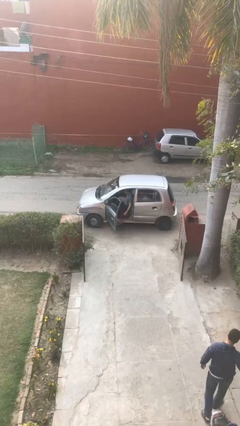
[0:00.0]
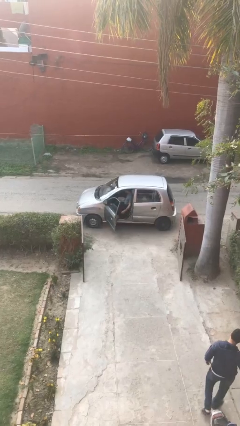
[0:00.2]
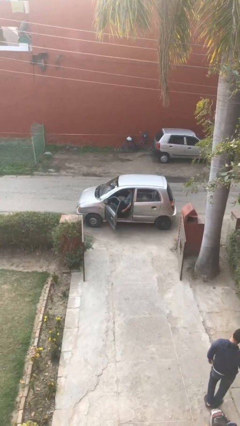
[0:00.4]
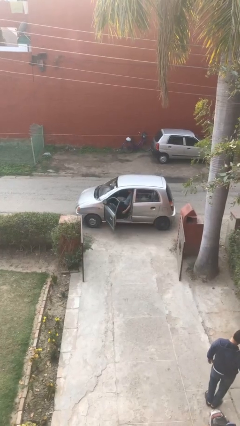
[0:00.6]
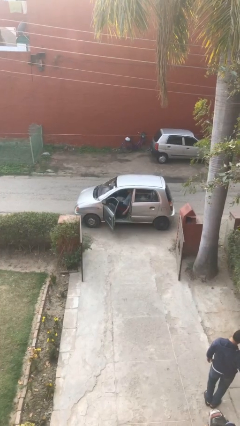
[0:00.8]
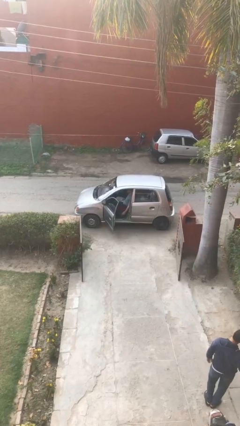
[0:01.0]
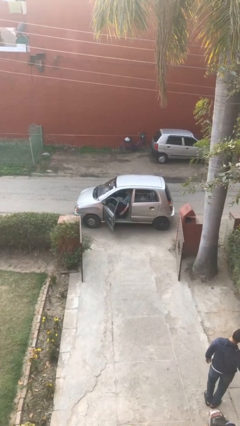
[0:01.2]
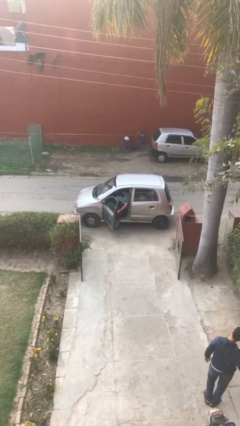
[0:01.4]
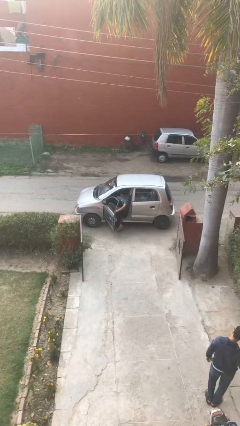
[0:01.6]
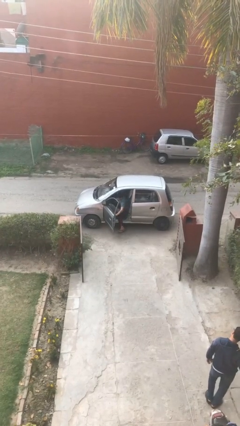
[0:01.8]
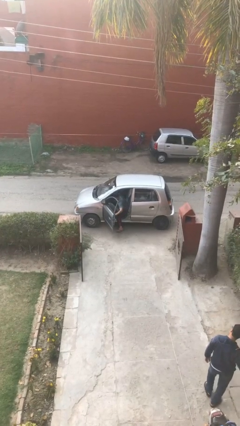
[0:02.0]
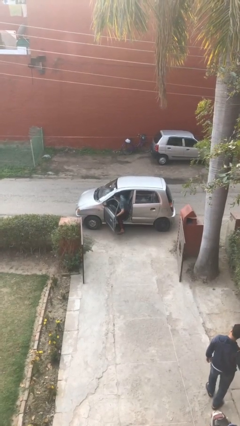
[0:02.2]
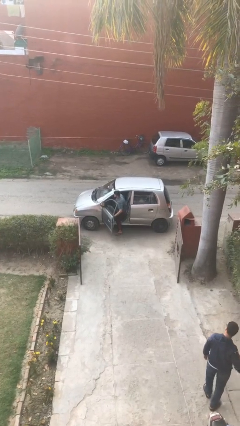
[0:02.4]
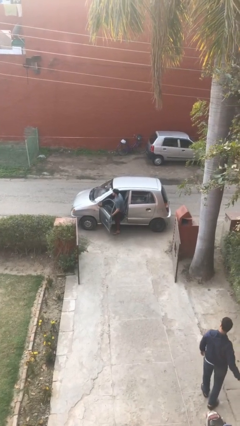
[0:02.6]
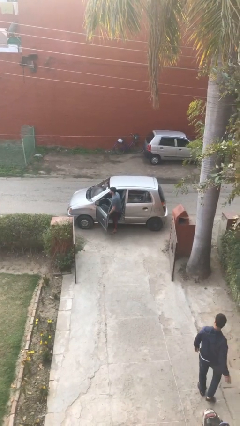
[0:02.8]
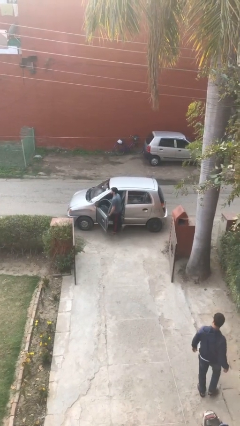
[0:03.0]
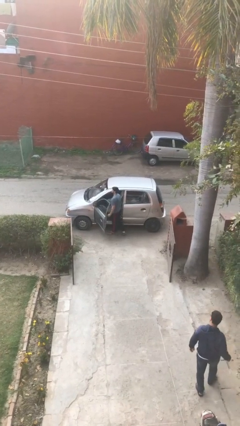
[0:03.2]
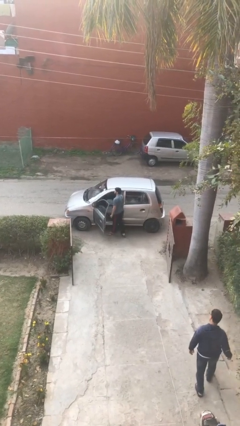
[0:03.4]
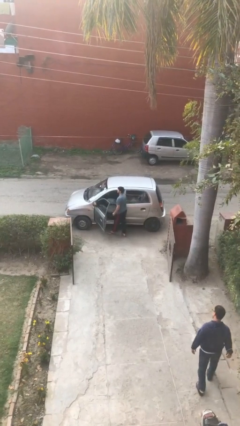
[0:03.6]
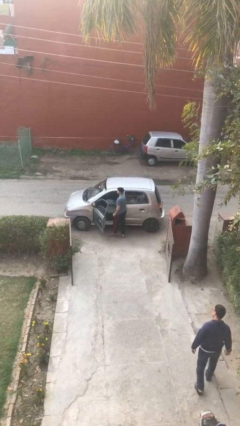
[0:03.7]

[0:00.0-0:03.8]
person exits car

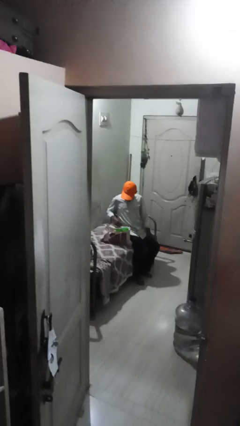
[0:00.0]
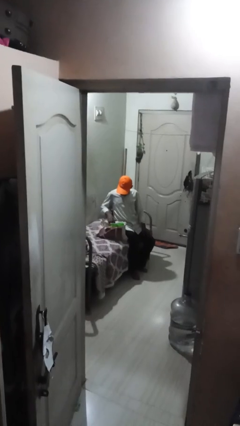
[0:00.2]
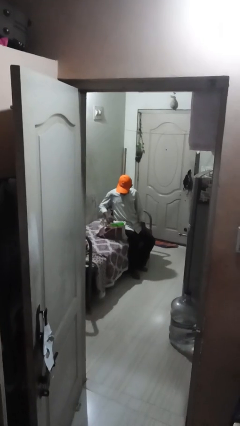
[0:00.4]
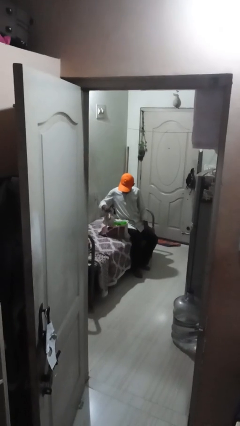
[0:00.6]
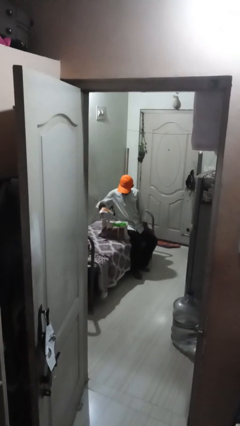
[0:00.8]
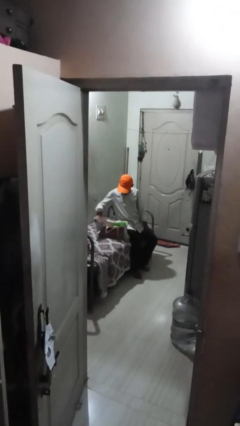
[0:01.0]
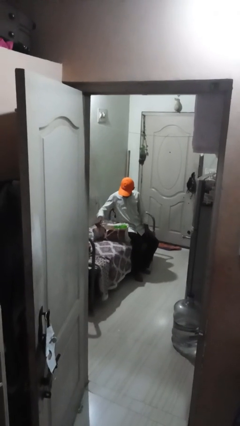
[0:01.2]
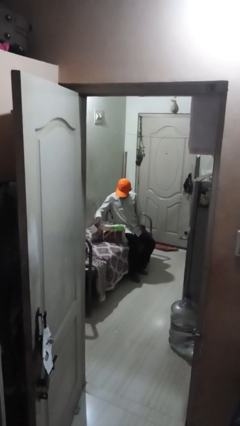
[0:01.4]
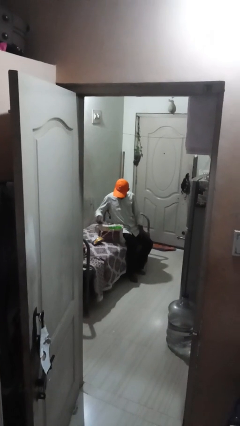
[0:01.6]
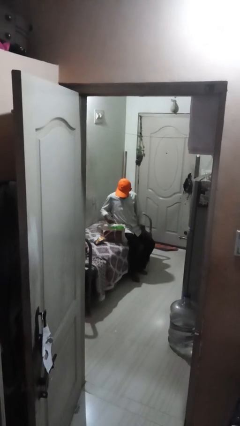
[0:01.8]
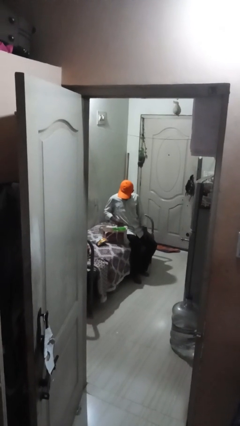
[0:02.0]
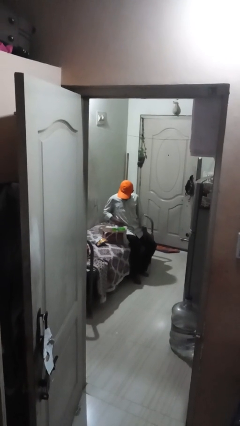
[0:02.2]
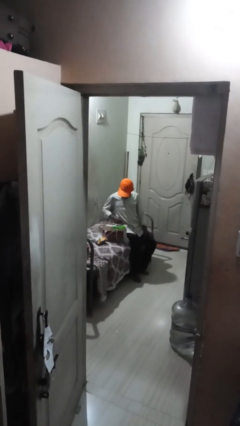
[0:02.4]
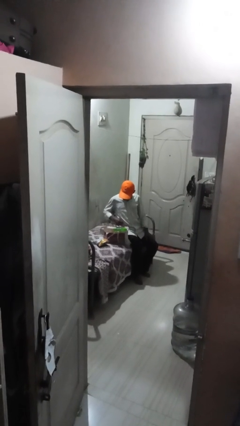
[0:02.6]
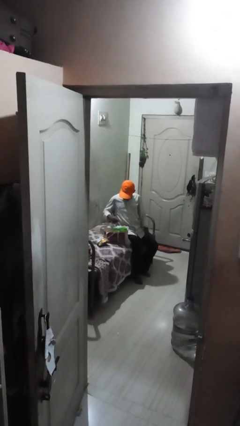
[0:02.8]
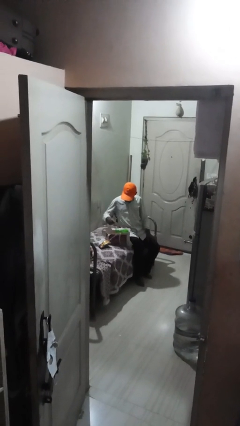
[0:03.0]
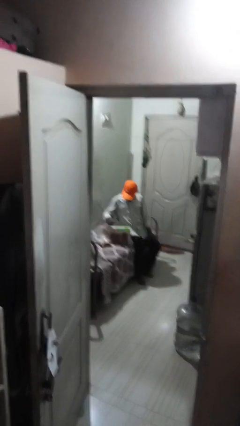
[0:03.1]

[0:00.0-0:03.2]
person takes object from bag

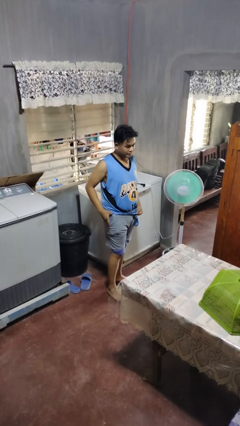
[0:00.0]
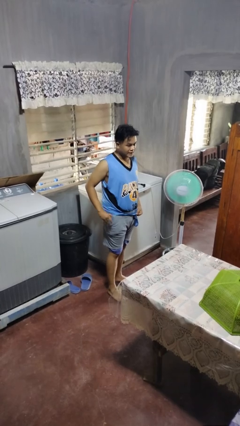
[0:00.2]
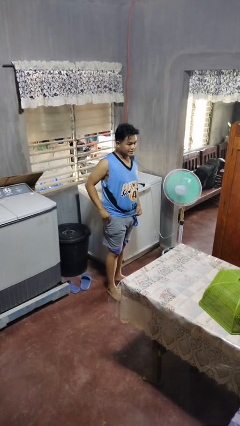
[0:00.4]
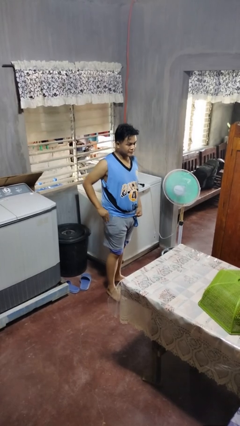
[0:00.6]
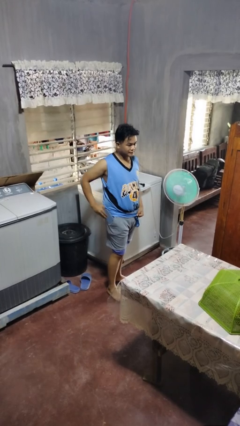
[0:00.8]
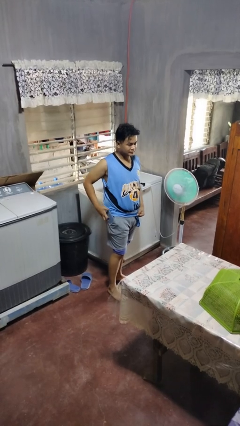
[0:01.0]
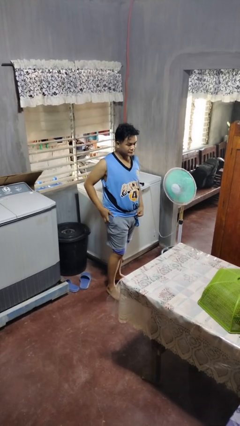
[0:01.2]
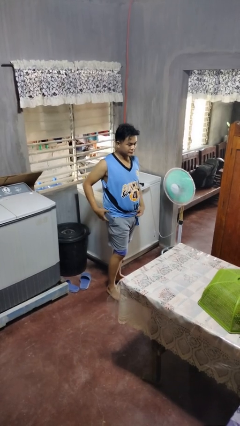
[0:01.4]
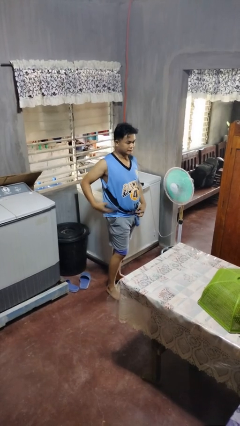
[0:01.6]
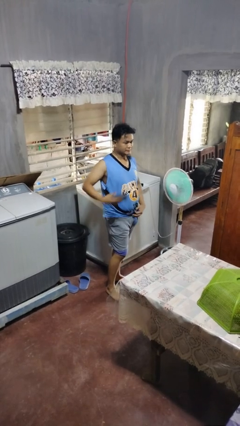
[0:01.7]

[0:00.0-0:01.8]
person takes phone from pocket

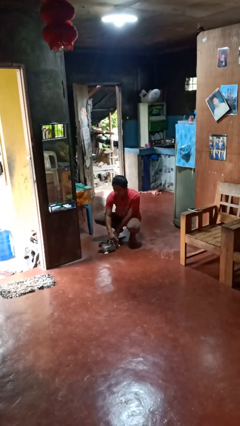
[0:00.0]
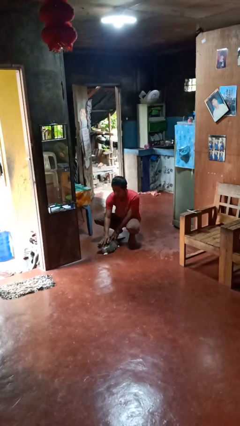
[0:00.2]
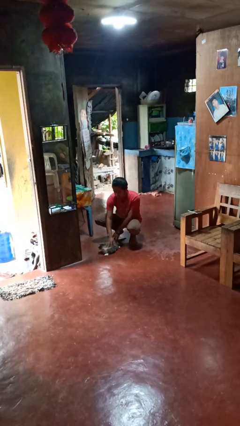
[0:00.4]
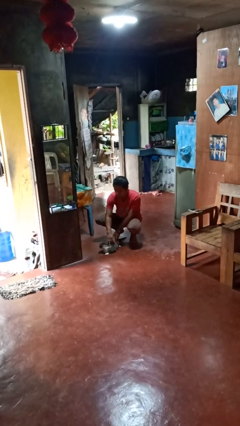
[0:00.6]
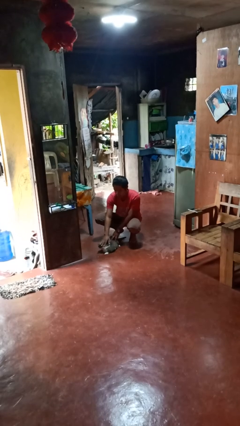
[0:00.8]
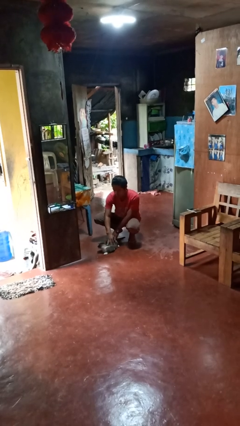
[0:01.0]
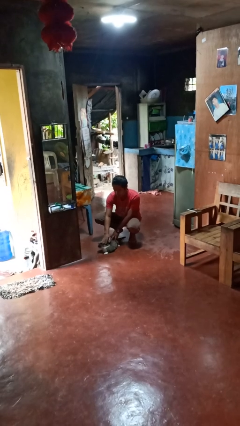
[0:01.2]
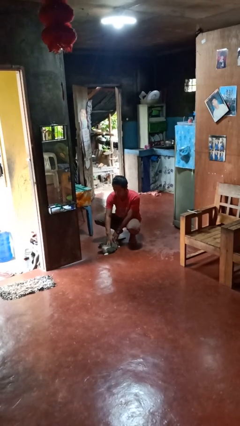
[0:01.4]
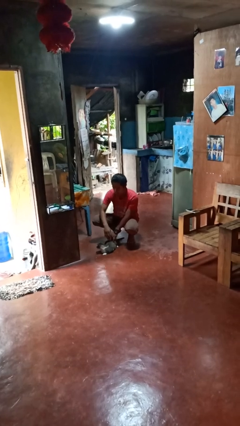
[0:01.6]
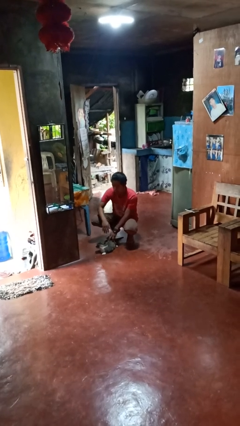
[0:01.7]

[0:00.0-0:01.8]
person pets cat

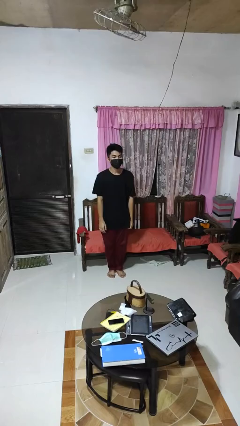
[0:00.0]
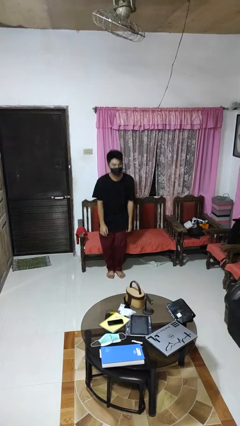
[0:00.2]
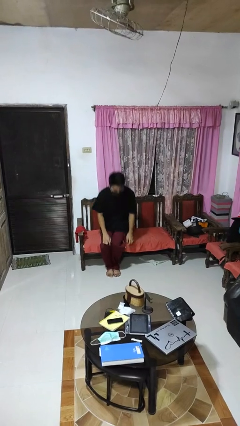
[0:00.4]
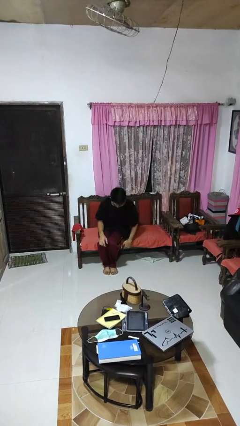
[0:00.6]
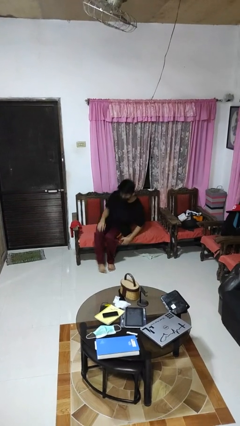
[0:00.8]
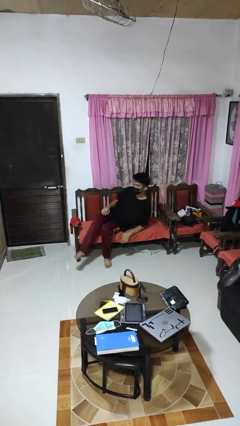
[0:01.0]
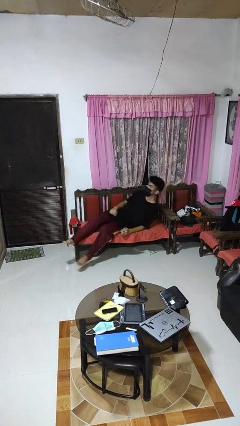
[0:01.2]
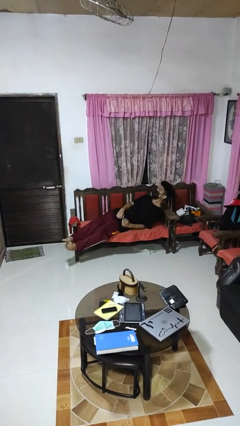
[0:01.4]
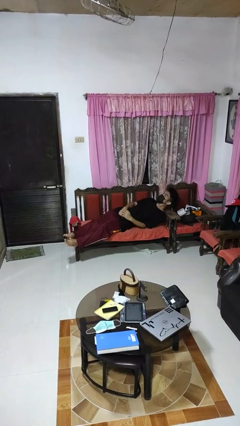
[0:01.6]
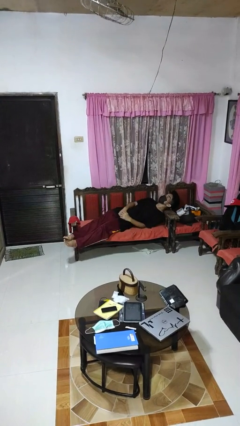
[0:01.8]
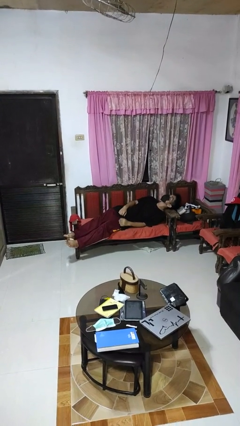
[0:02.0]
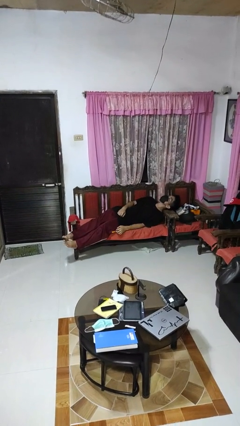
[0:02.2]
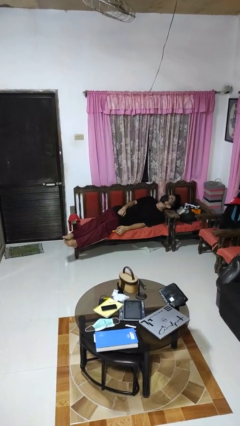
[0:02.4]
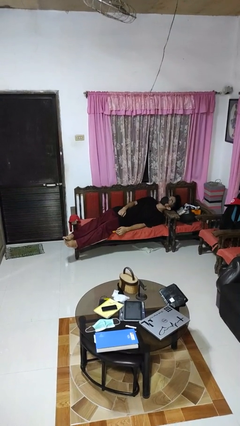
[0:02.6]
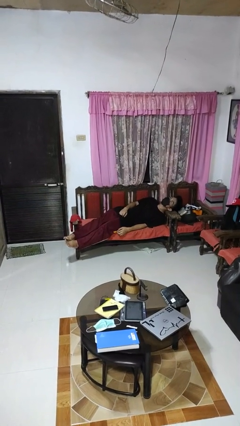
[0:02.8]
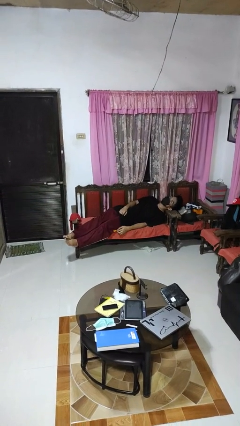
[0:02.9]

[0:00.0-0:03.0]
person lies down on couch

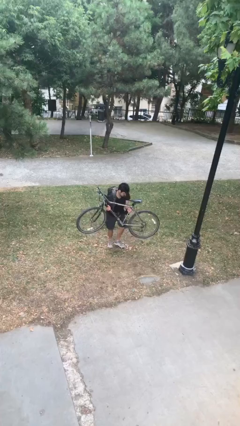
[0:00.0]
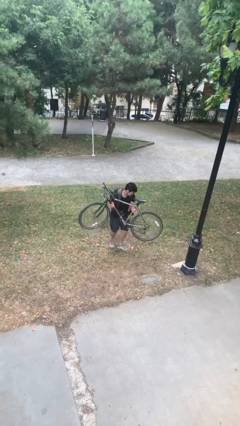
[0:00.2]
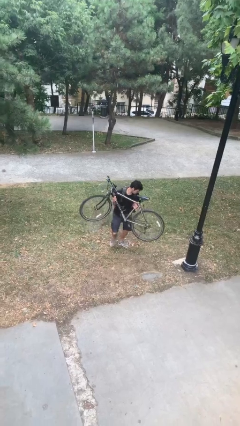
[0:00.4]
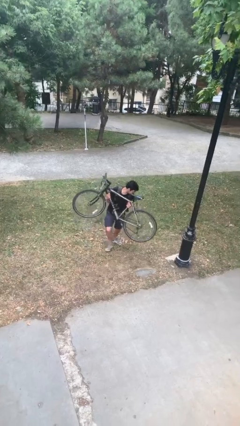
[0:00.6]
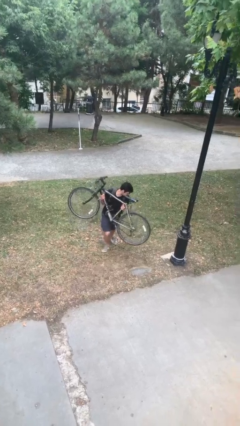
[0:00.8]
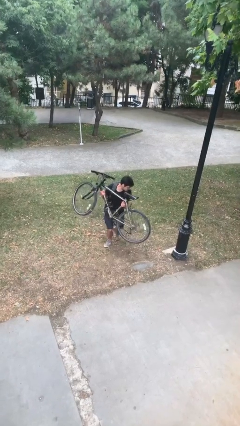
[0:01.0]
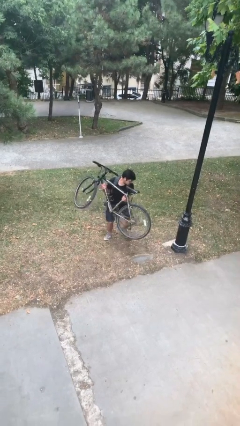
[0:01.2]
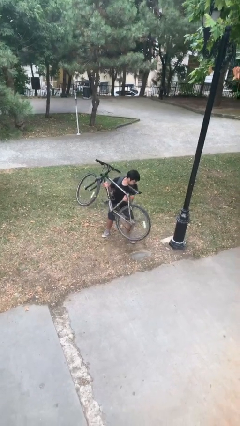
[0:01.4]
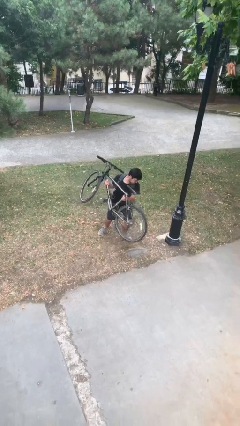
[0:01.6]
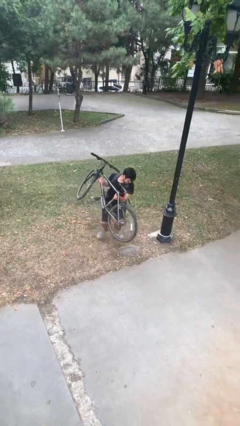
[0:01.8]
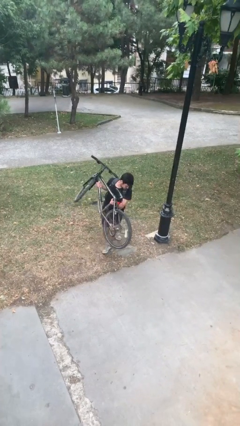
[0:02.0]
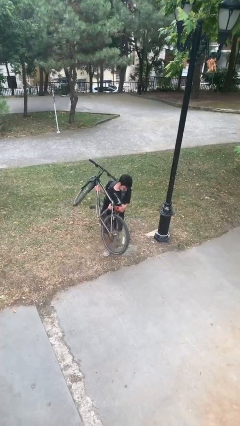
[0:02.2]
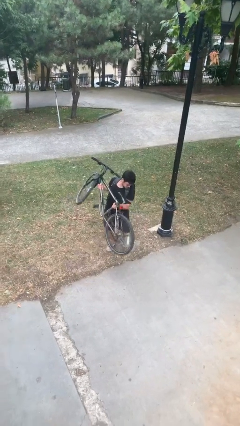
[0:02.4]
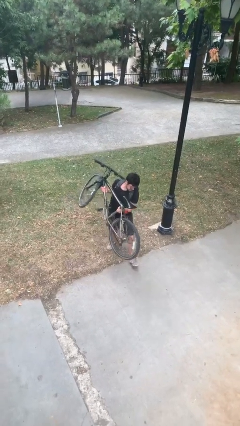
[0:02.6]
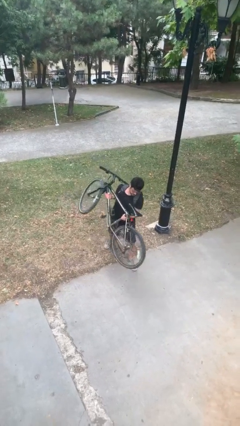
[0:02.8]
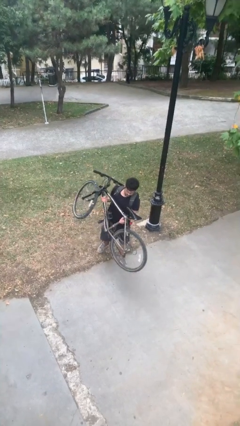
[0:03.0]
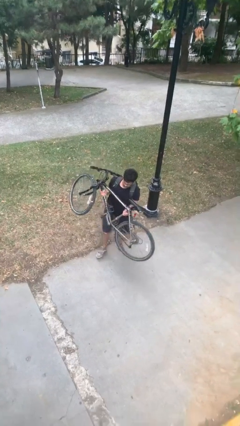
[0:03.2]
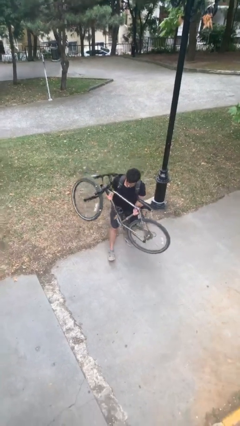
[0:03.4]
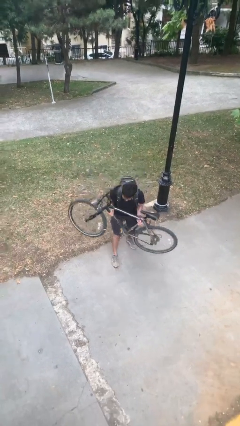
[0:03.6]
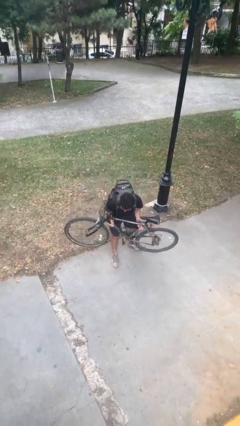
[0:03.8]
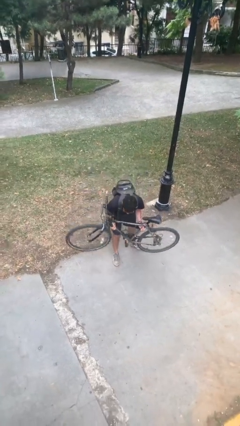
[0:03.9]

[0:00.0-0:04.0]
person carries heavy object
